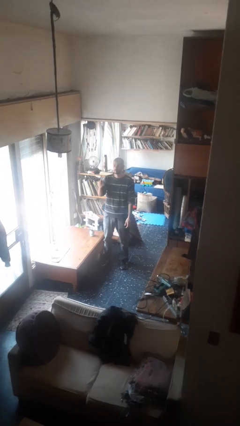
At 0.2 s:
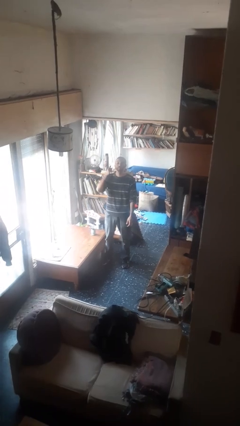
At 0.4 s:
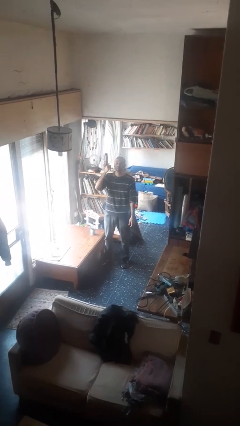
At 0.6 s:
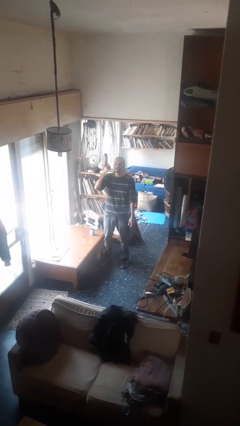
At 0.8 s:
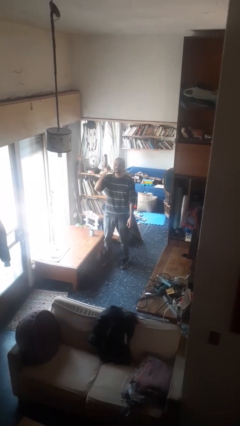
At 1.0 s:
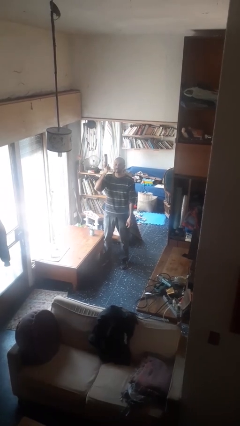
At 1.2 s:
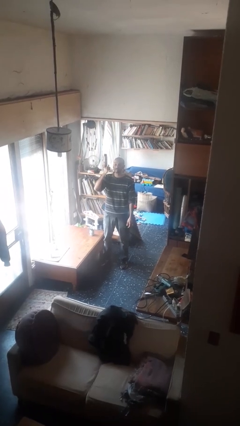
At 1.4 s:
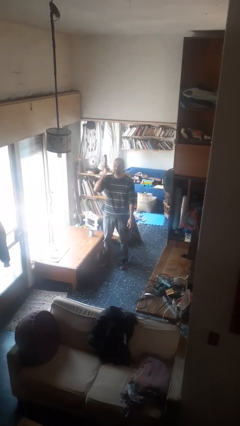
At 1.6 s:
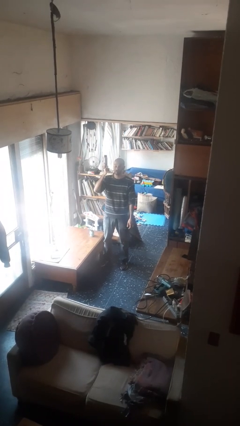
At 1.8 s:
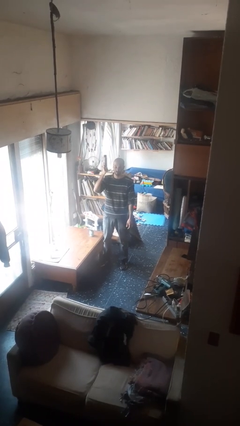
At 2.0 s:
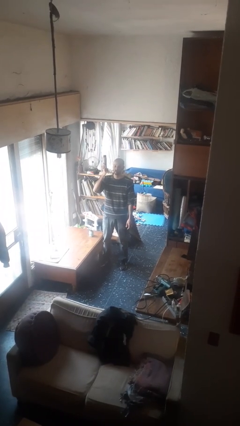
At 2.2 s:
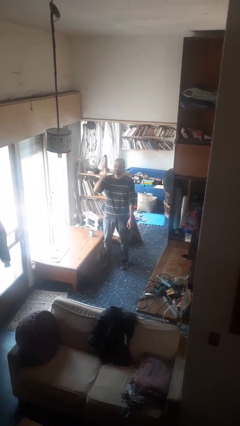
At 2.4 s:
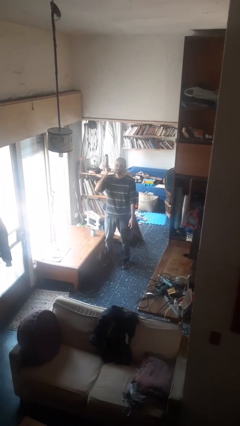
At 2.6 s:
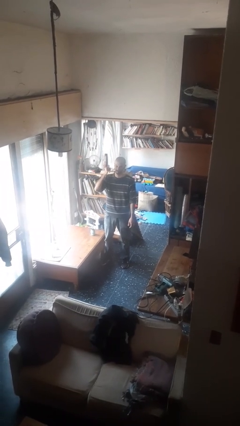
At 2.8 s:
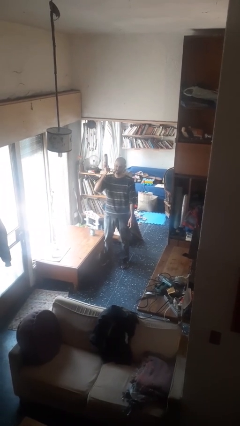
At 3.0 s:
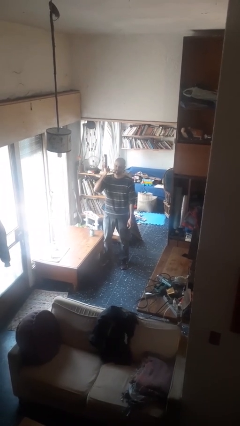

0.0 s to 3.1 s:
person gestures call me

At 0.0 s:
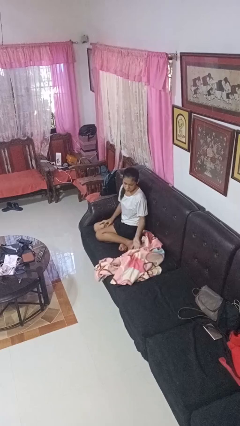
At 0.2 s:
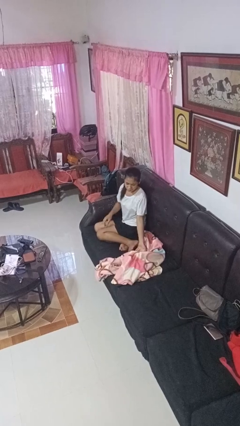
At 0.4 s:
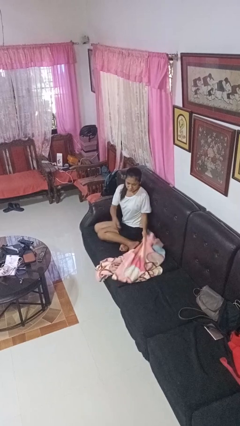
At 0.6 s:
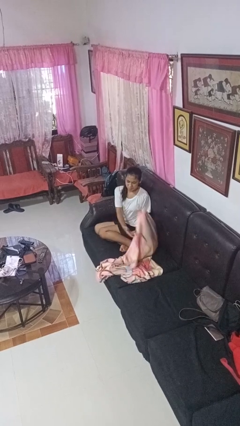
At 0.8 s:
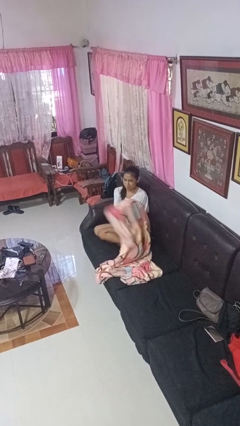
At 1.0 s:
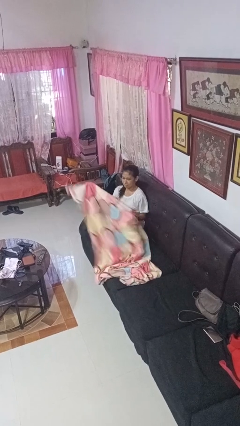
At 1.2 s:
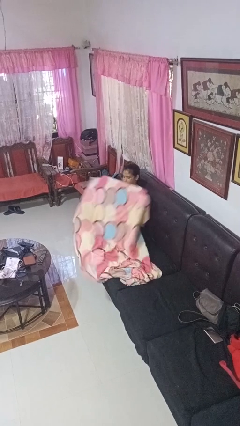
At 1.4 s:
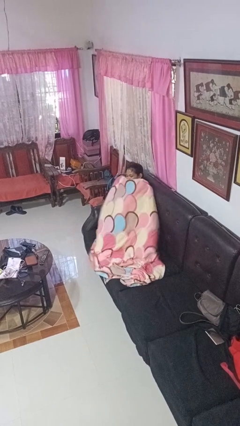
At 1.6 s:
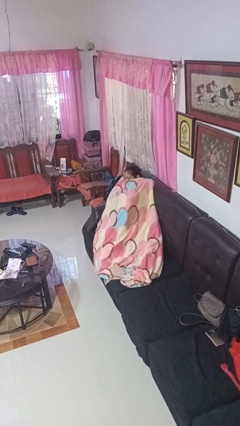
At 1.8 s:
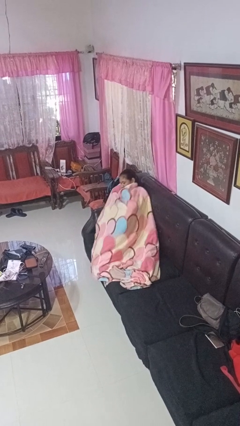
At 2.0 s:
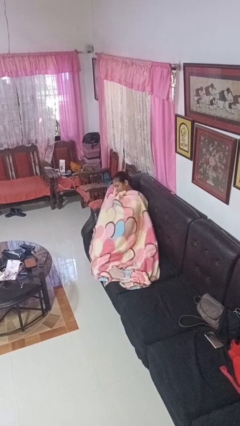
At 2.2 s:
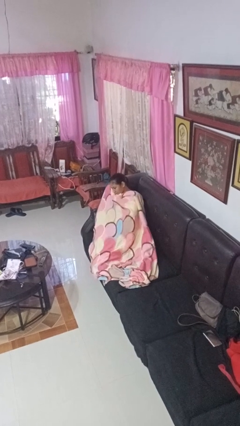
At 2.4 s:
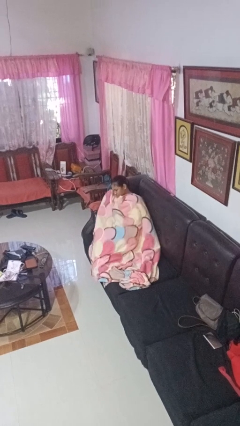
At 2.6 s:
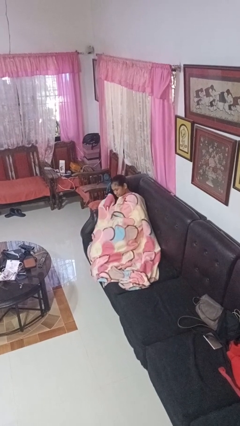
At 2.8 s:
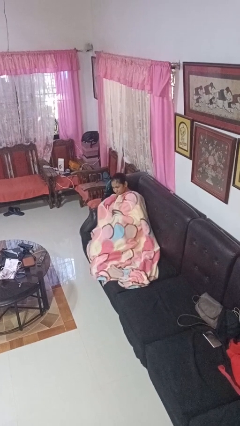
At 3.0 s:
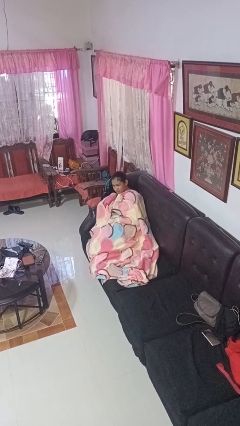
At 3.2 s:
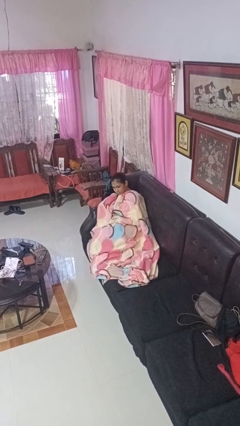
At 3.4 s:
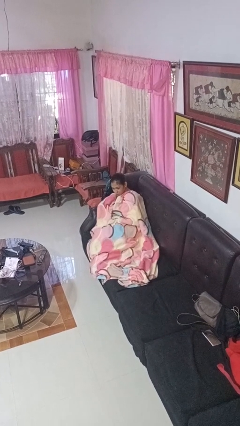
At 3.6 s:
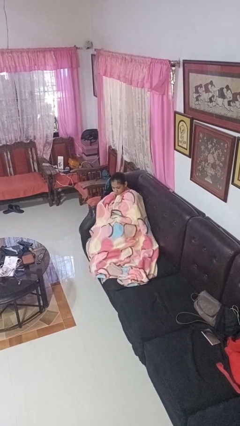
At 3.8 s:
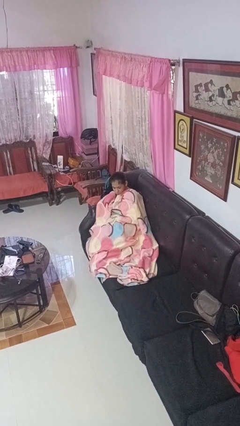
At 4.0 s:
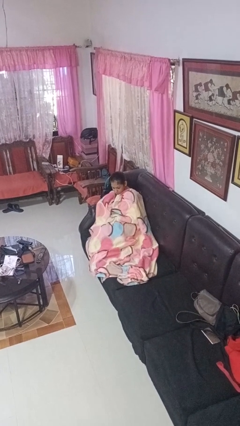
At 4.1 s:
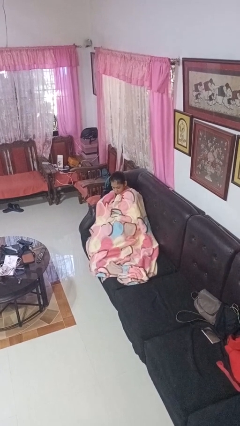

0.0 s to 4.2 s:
person covers with blanket

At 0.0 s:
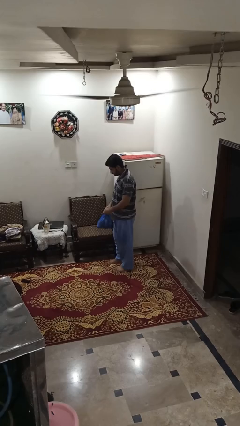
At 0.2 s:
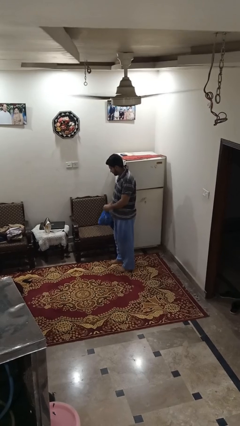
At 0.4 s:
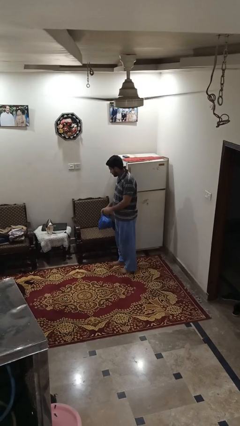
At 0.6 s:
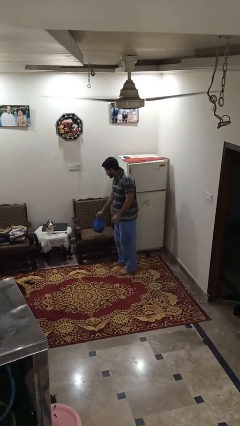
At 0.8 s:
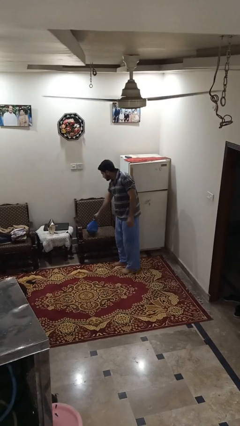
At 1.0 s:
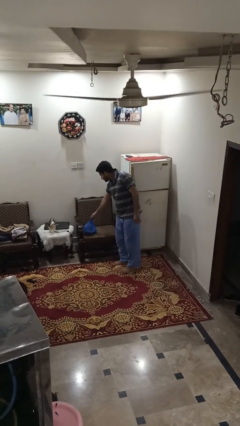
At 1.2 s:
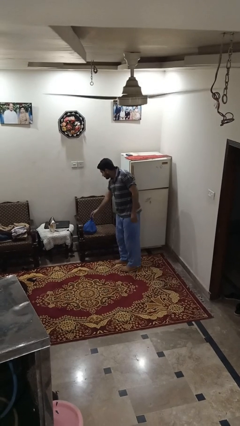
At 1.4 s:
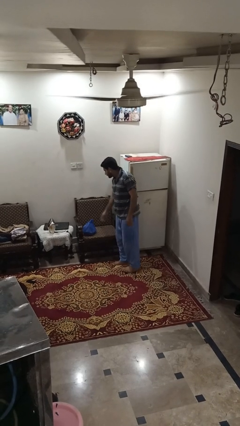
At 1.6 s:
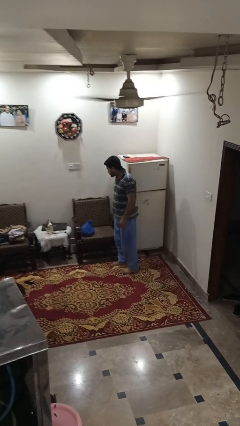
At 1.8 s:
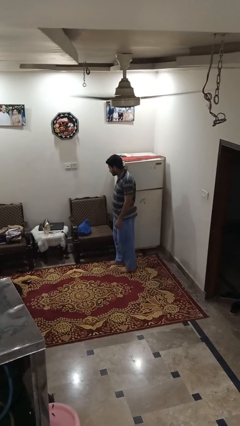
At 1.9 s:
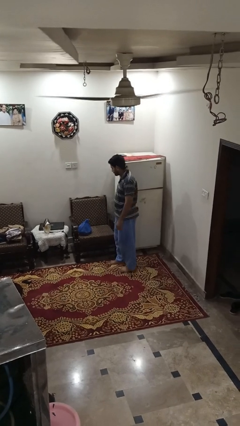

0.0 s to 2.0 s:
person puts down object on couch

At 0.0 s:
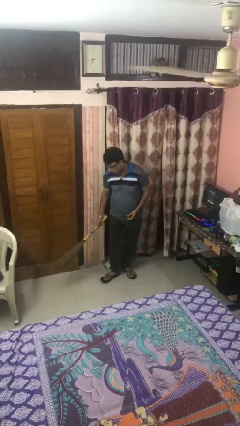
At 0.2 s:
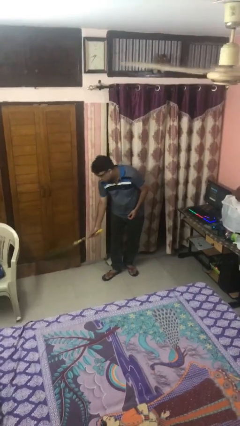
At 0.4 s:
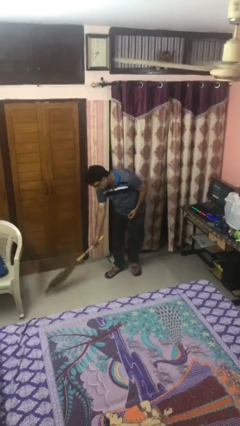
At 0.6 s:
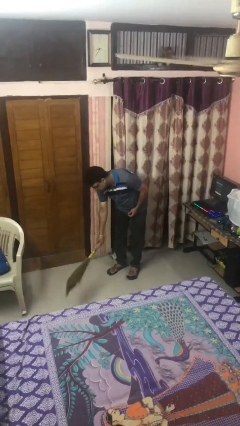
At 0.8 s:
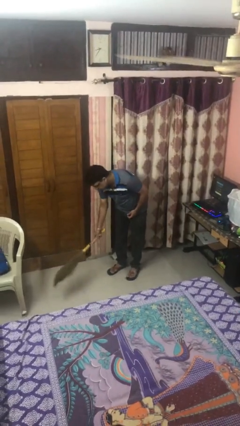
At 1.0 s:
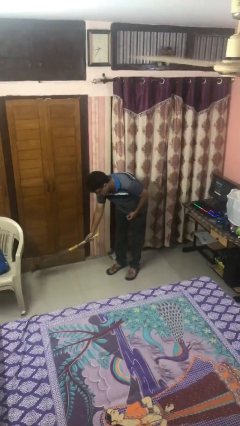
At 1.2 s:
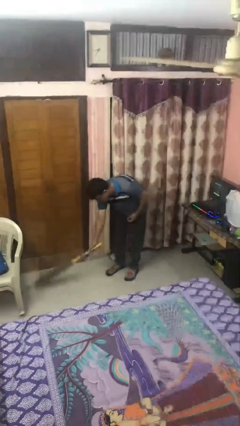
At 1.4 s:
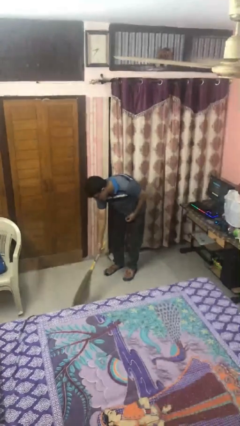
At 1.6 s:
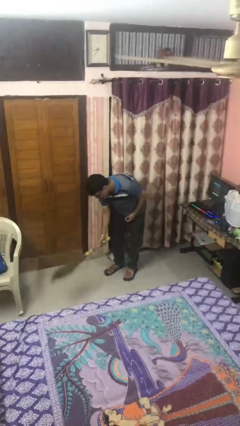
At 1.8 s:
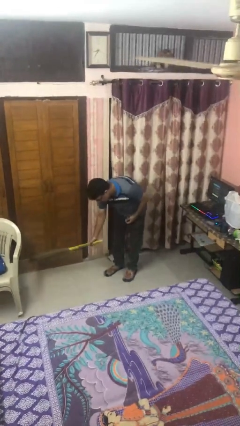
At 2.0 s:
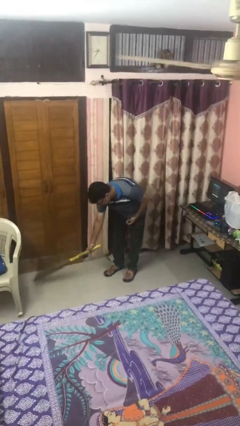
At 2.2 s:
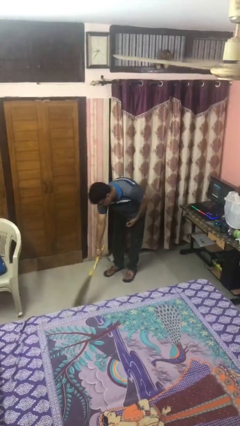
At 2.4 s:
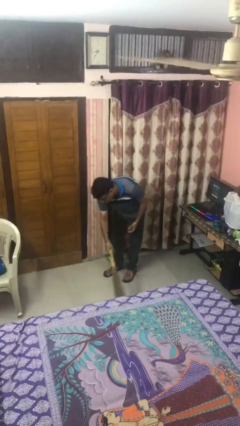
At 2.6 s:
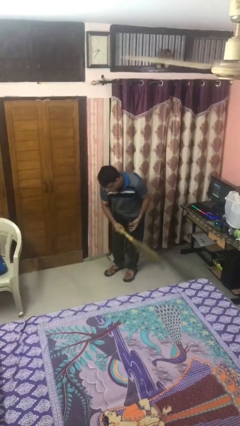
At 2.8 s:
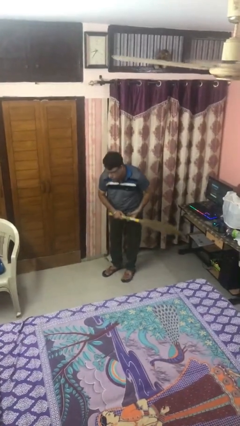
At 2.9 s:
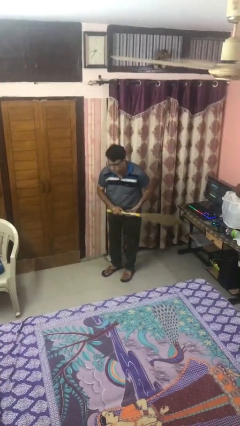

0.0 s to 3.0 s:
person sweeps floor

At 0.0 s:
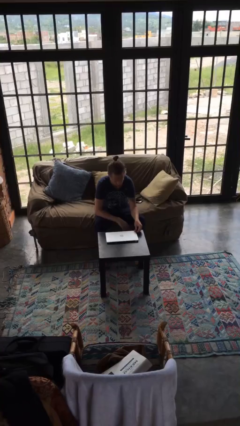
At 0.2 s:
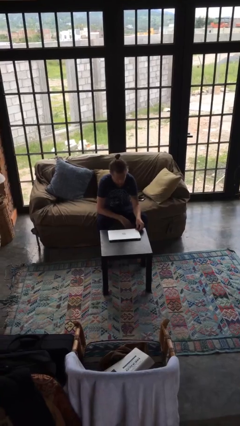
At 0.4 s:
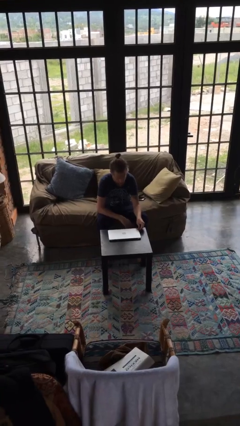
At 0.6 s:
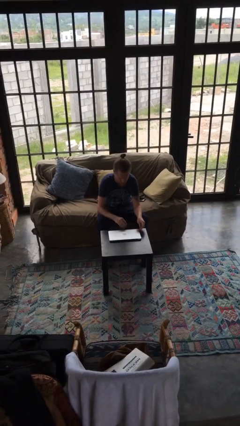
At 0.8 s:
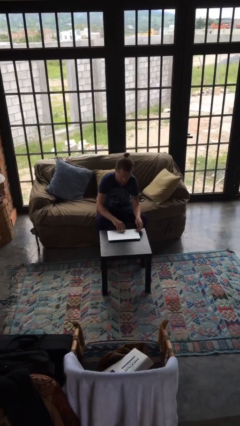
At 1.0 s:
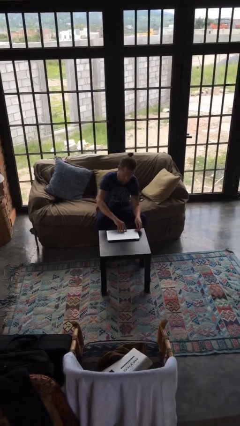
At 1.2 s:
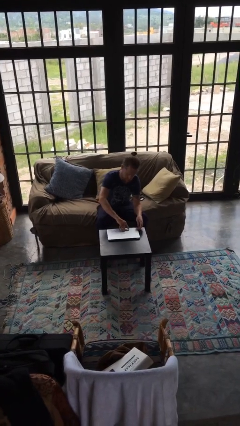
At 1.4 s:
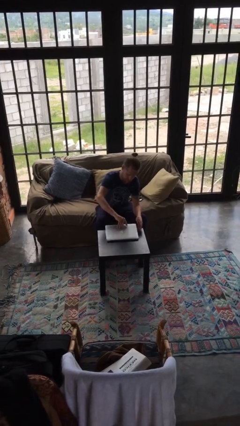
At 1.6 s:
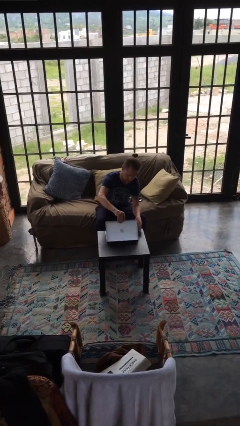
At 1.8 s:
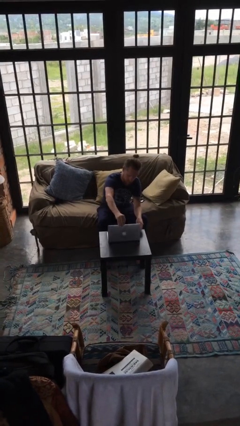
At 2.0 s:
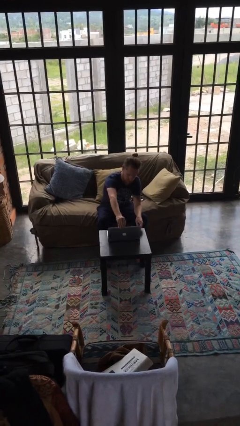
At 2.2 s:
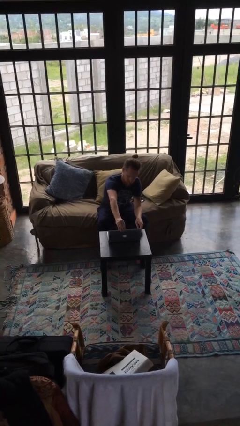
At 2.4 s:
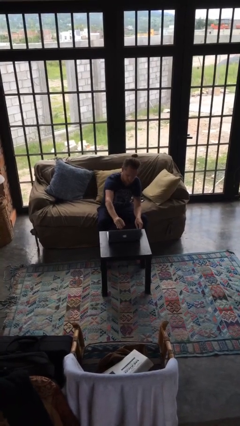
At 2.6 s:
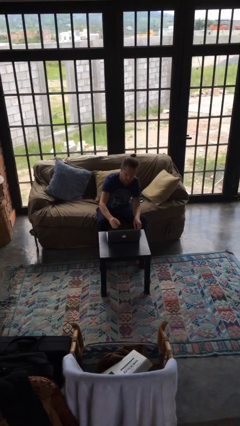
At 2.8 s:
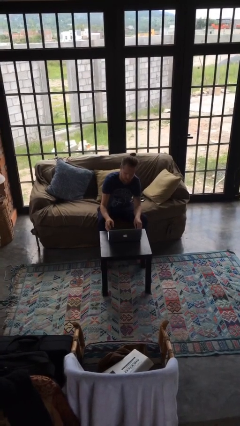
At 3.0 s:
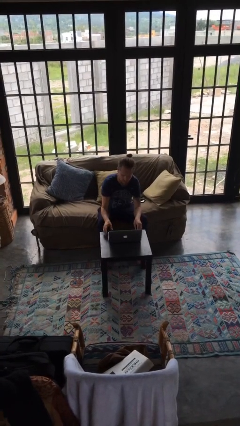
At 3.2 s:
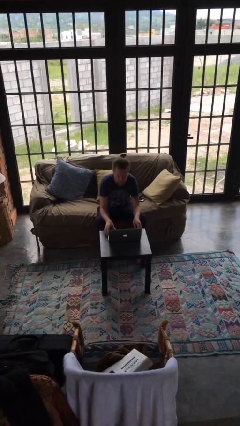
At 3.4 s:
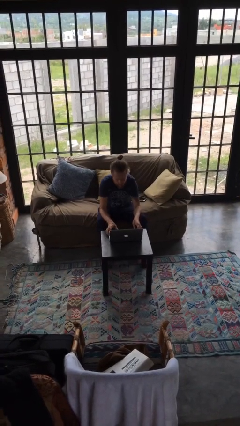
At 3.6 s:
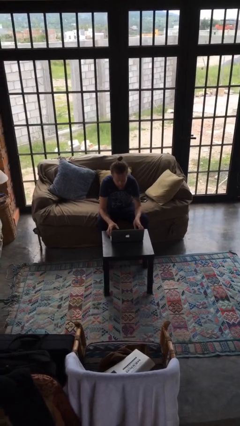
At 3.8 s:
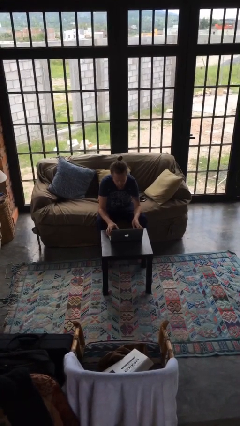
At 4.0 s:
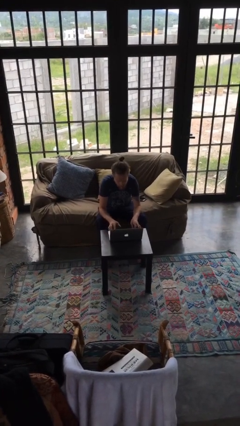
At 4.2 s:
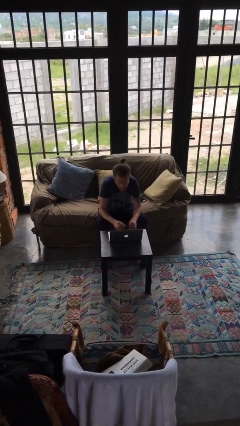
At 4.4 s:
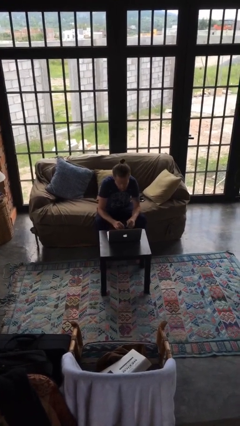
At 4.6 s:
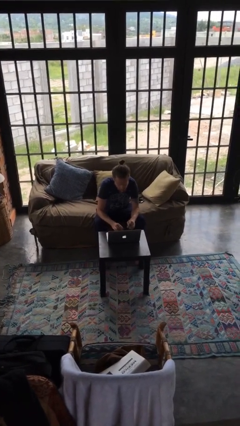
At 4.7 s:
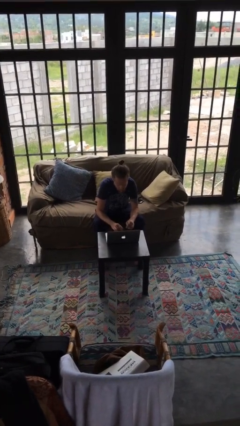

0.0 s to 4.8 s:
person opens laptop

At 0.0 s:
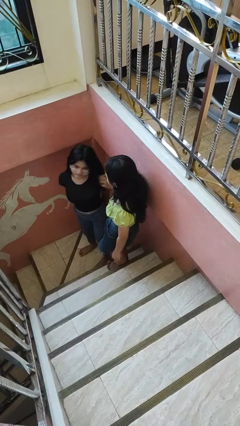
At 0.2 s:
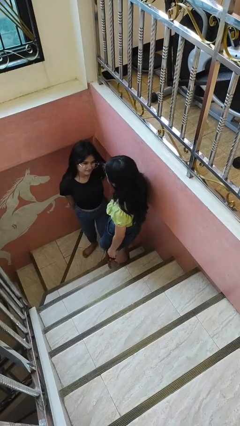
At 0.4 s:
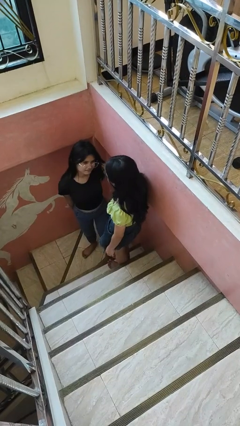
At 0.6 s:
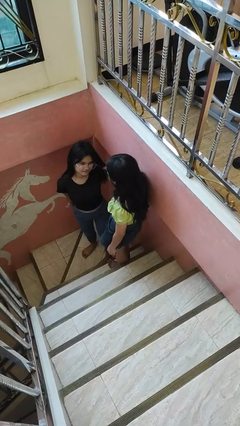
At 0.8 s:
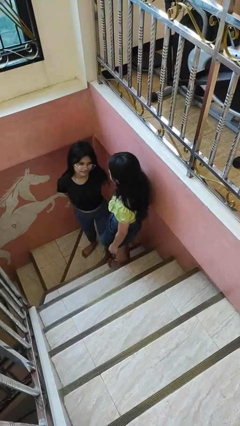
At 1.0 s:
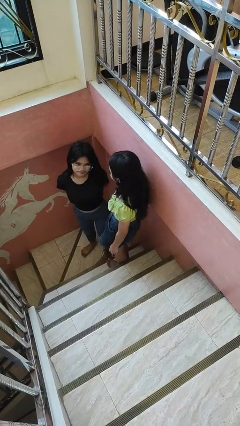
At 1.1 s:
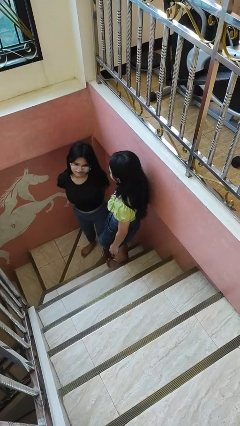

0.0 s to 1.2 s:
person spins person around
